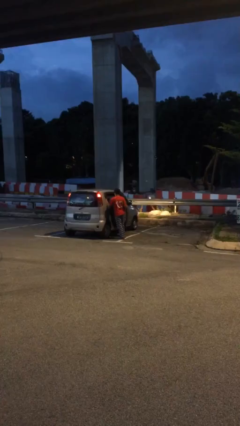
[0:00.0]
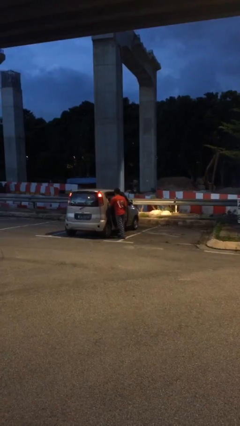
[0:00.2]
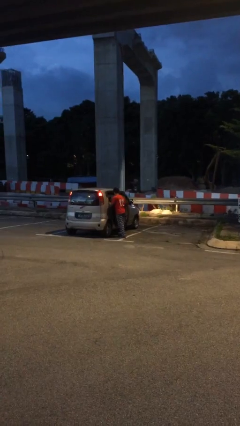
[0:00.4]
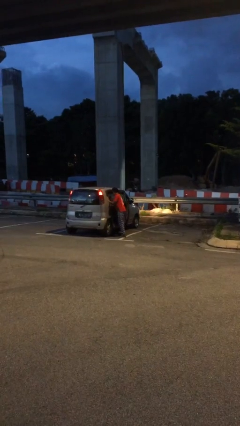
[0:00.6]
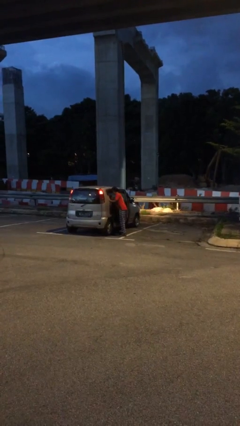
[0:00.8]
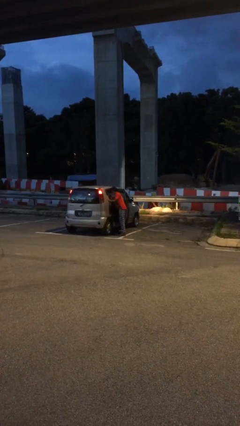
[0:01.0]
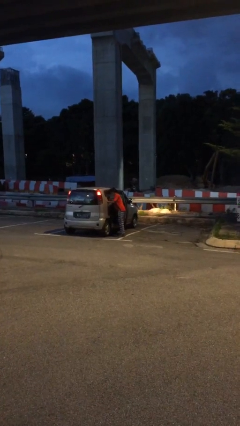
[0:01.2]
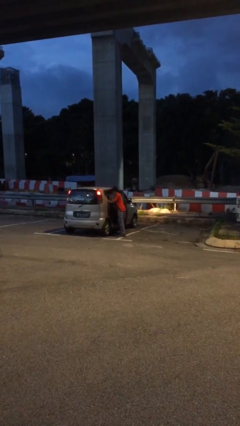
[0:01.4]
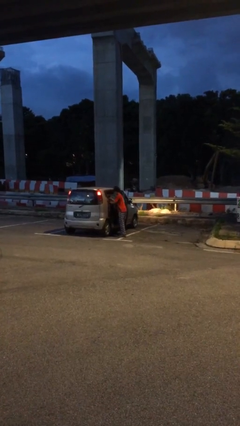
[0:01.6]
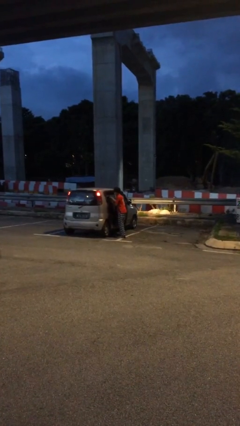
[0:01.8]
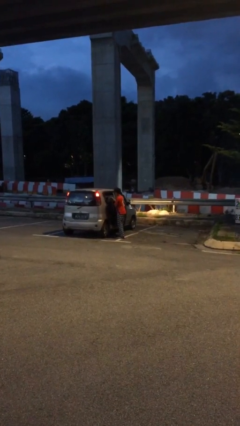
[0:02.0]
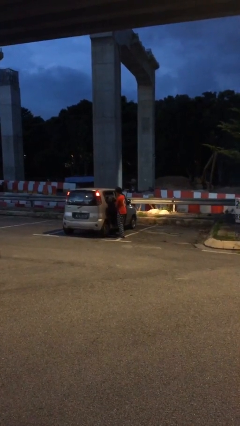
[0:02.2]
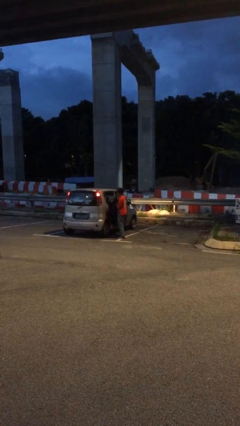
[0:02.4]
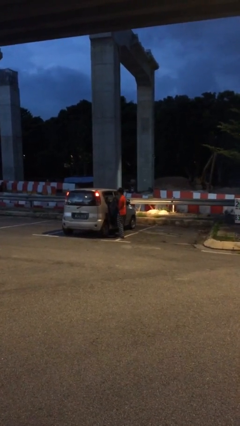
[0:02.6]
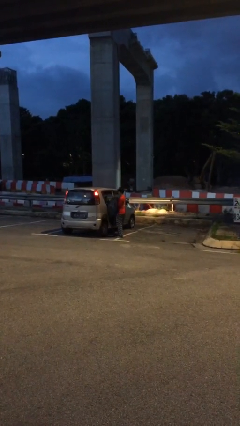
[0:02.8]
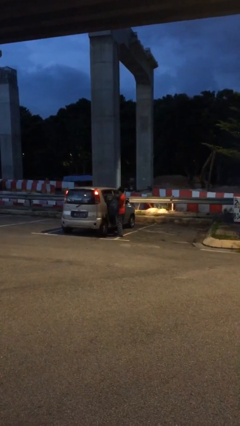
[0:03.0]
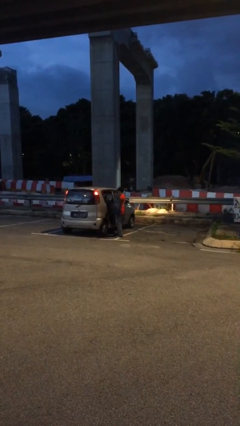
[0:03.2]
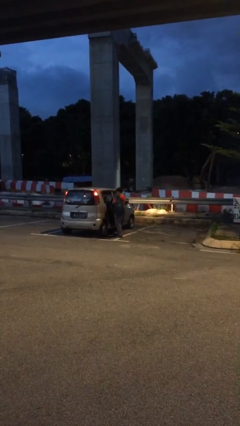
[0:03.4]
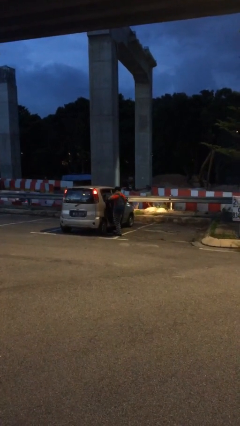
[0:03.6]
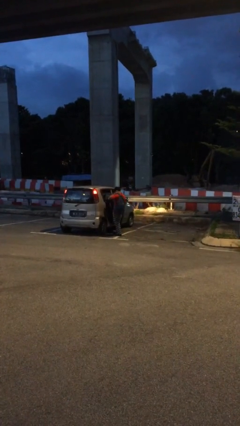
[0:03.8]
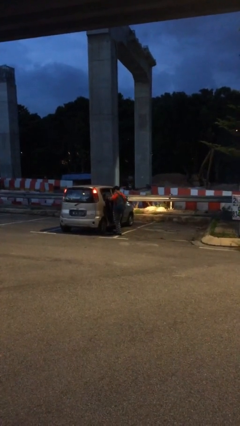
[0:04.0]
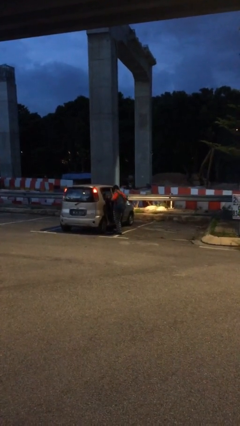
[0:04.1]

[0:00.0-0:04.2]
person unloads car

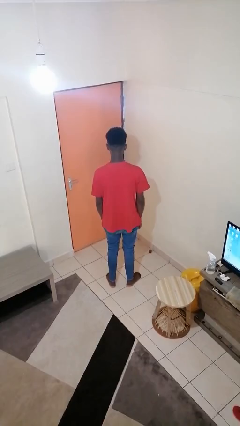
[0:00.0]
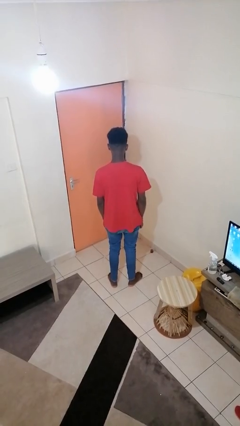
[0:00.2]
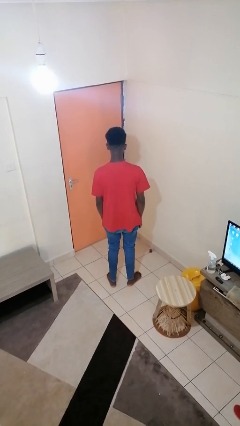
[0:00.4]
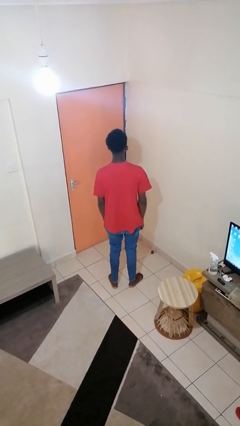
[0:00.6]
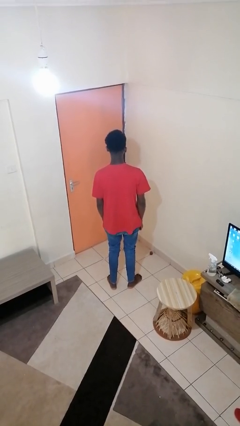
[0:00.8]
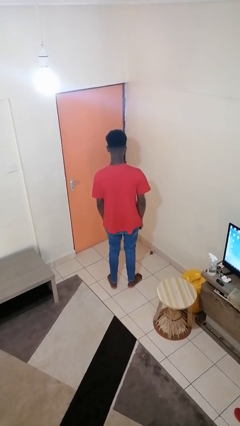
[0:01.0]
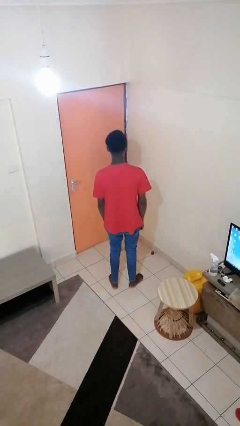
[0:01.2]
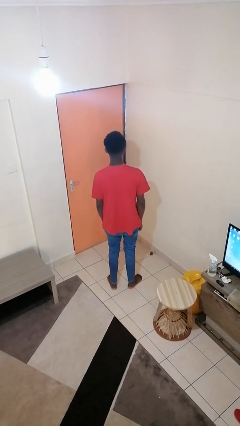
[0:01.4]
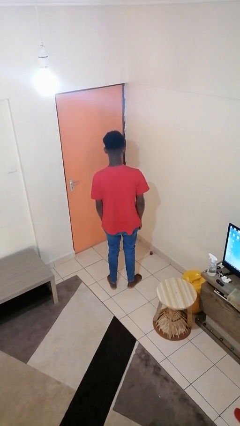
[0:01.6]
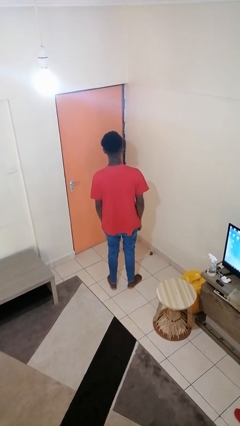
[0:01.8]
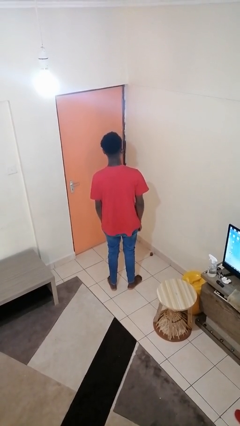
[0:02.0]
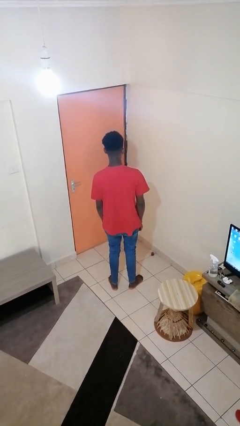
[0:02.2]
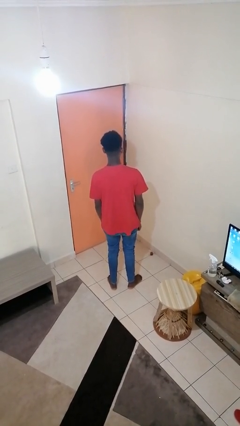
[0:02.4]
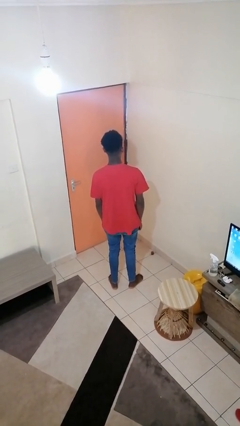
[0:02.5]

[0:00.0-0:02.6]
person nods head

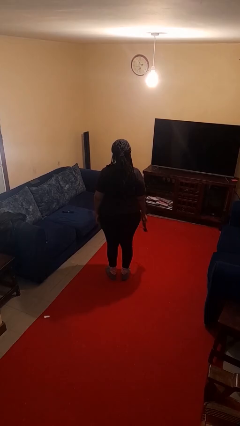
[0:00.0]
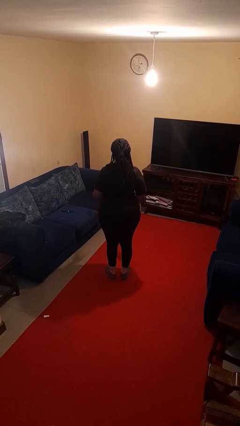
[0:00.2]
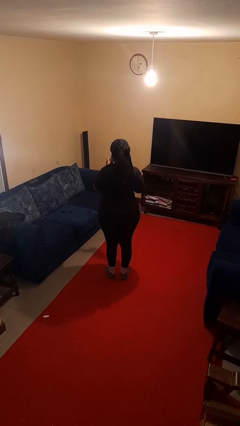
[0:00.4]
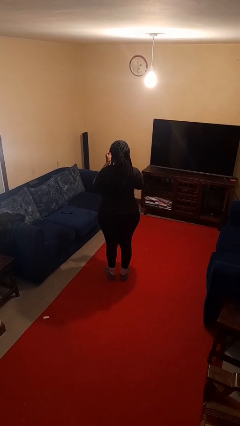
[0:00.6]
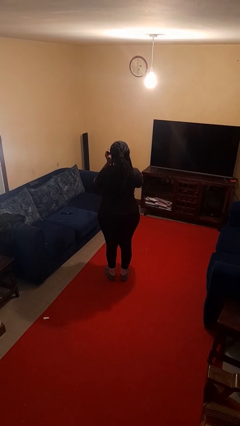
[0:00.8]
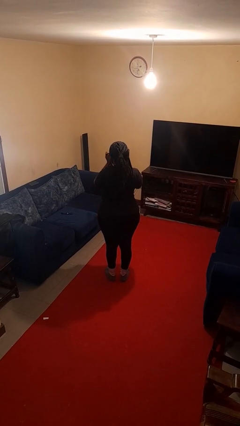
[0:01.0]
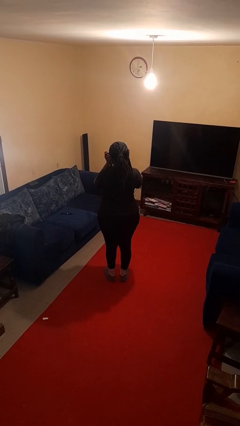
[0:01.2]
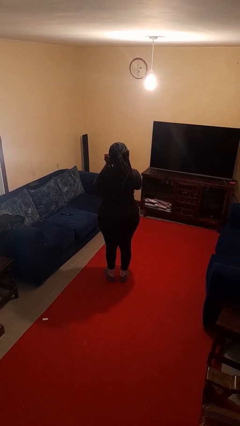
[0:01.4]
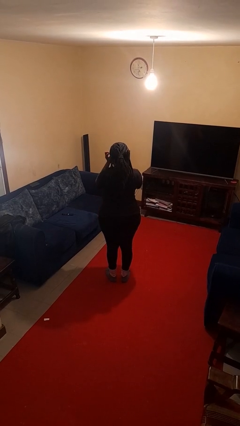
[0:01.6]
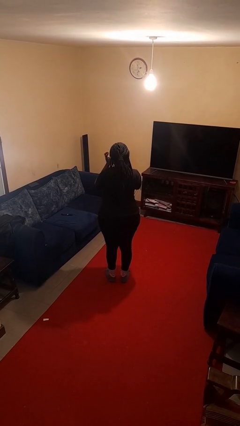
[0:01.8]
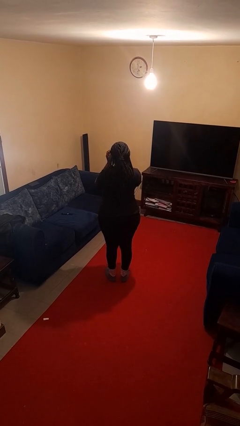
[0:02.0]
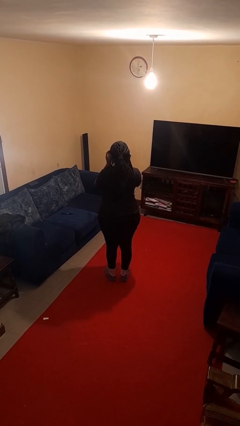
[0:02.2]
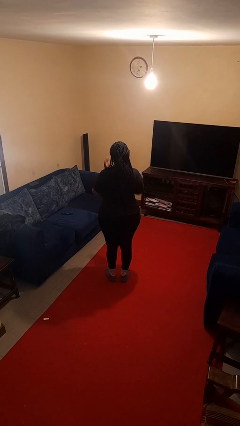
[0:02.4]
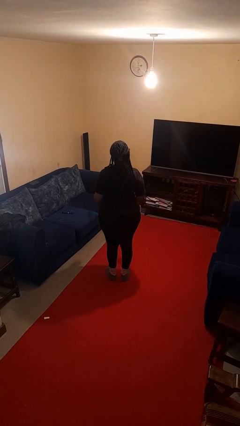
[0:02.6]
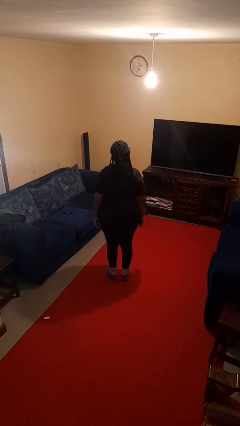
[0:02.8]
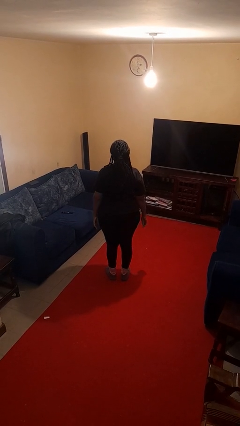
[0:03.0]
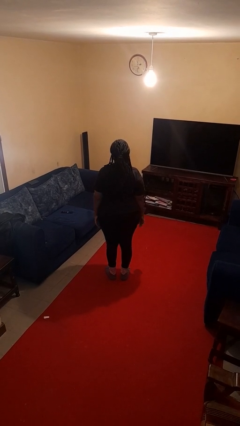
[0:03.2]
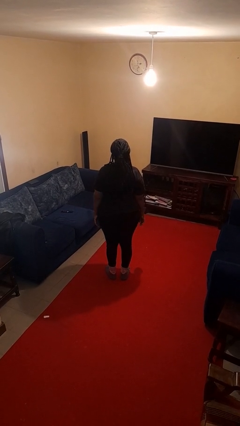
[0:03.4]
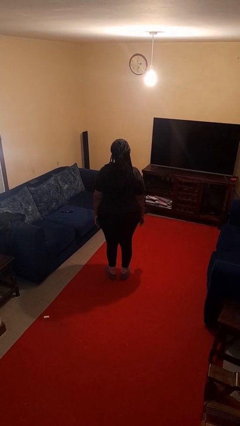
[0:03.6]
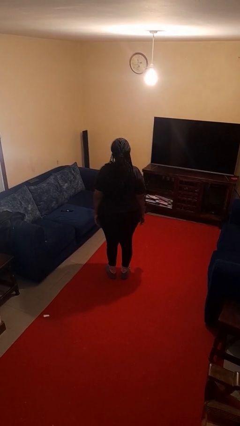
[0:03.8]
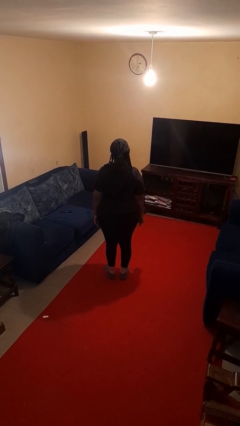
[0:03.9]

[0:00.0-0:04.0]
person puts on sunglasses

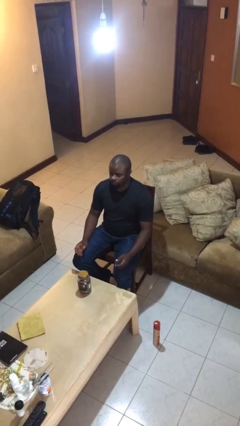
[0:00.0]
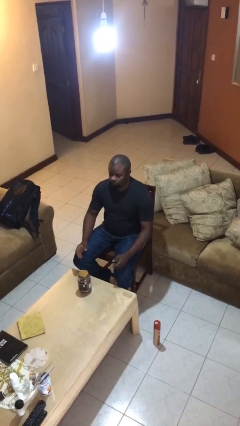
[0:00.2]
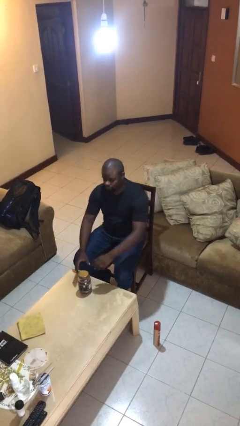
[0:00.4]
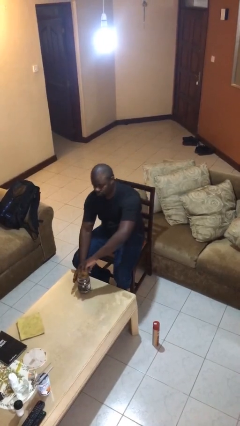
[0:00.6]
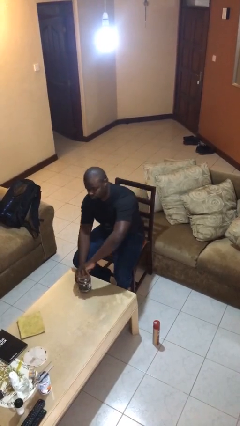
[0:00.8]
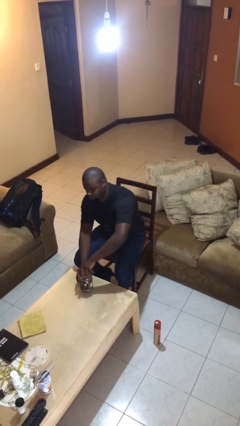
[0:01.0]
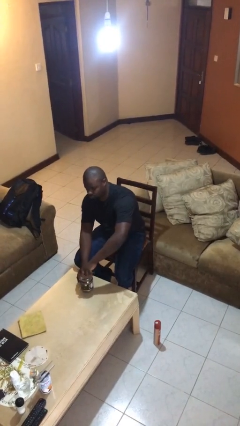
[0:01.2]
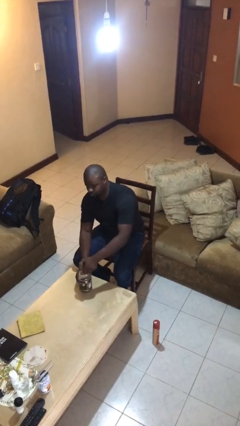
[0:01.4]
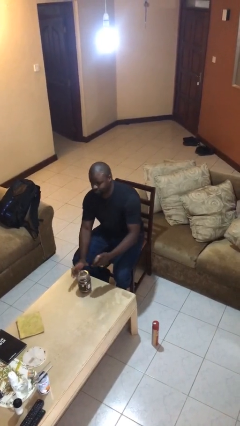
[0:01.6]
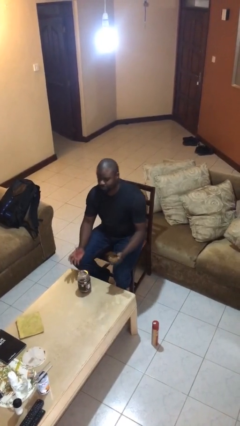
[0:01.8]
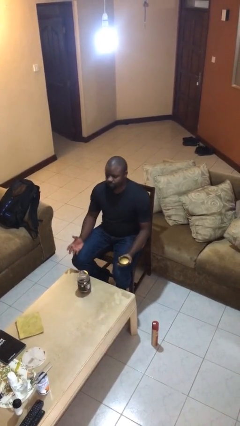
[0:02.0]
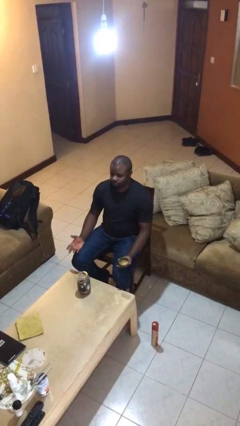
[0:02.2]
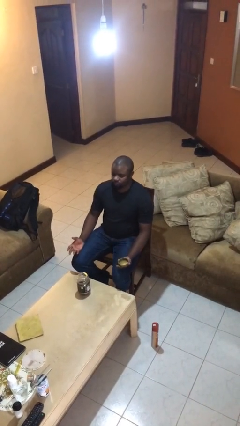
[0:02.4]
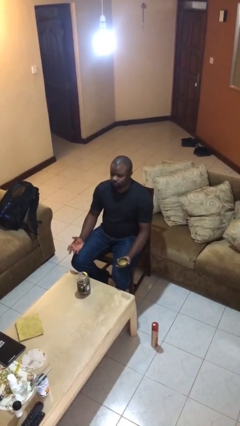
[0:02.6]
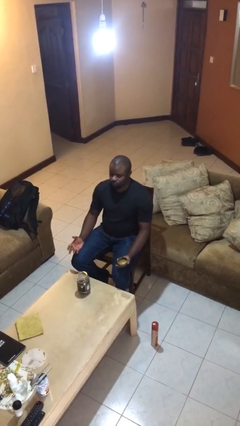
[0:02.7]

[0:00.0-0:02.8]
person opens jar

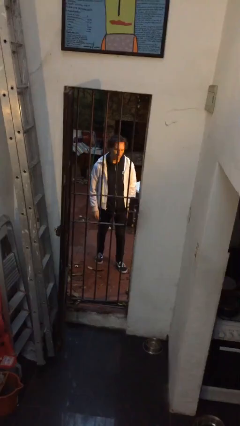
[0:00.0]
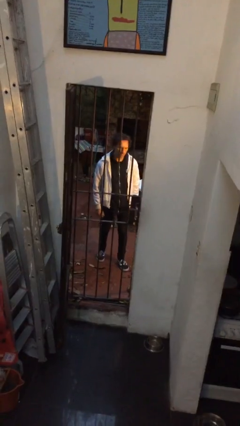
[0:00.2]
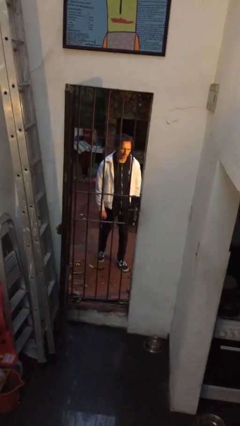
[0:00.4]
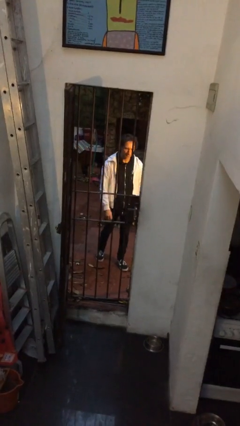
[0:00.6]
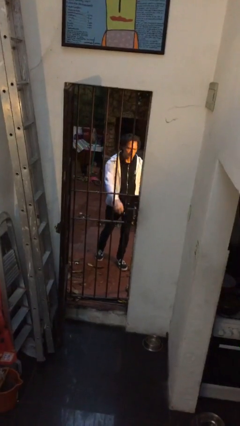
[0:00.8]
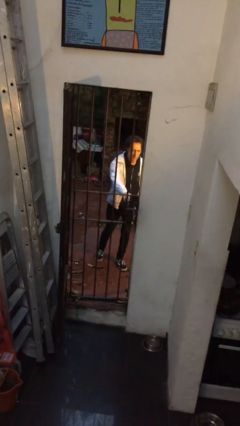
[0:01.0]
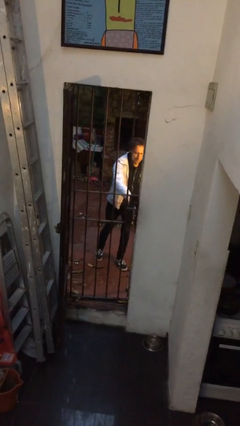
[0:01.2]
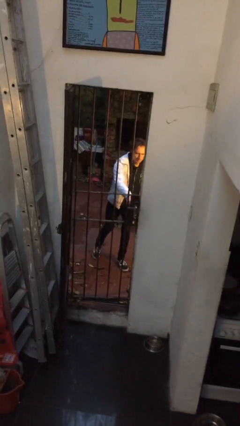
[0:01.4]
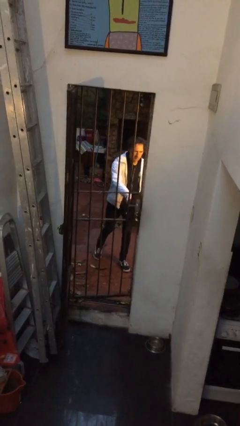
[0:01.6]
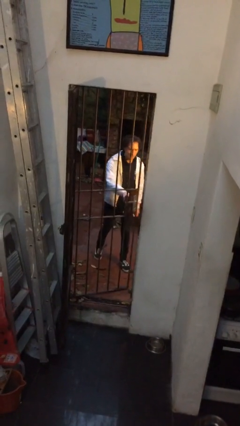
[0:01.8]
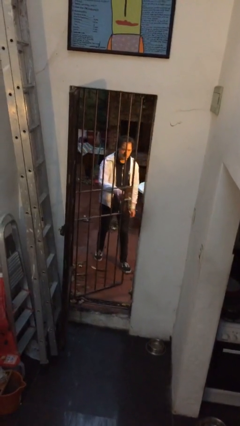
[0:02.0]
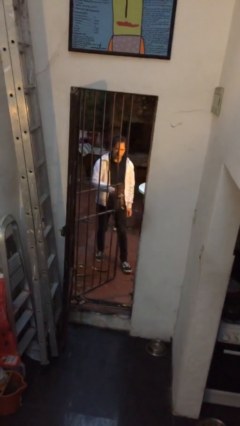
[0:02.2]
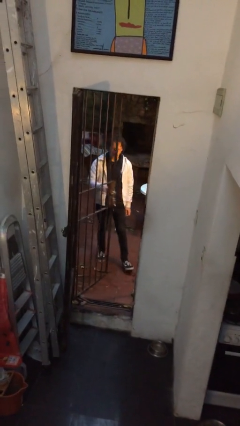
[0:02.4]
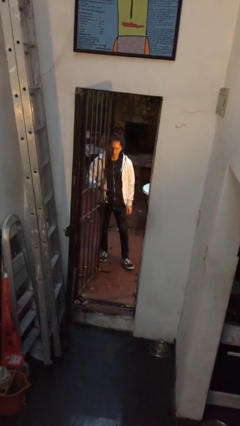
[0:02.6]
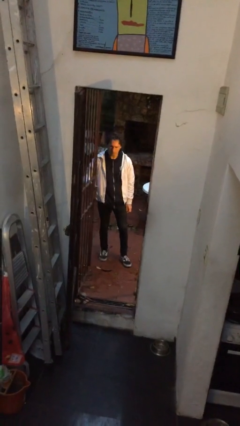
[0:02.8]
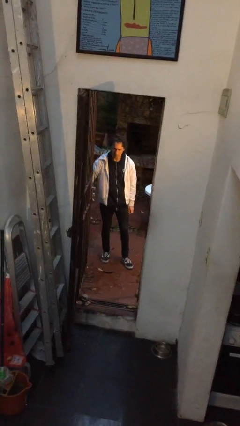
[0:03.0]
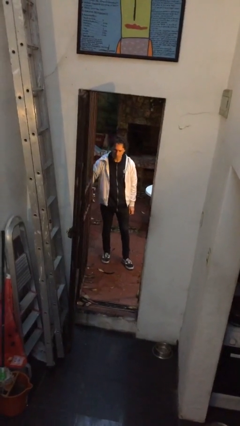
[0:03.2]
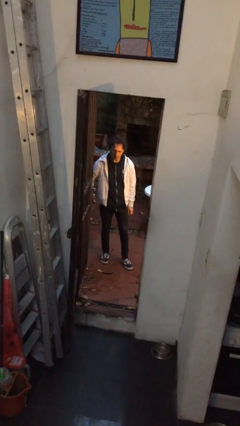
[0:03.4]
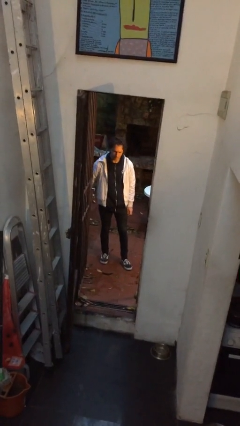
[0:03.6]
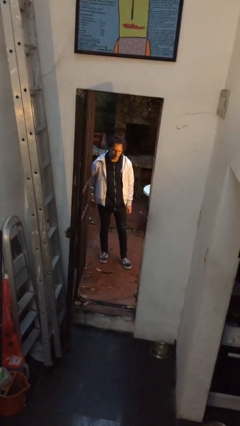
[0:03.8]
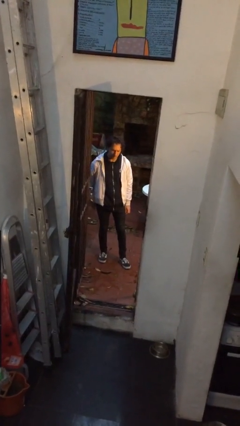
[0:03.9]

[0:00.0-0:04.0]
person opens gate
